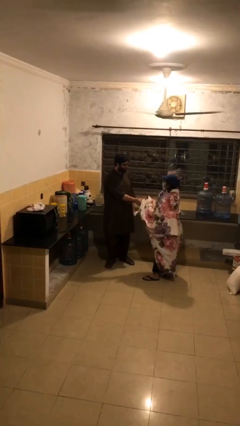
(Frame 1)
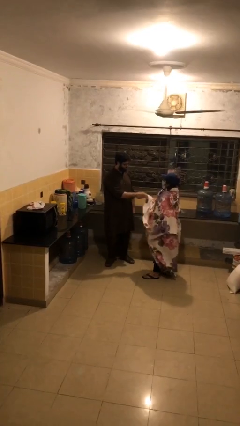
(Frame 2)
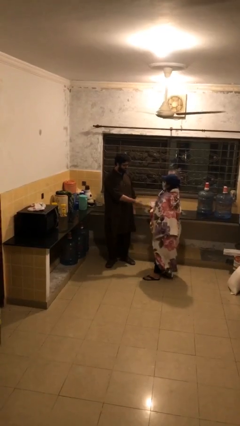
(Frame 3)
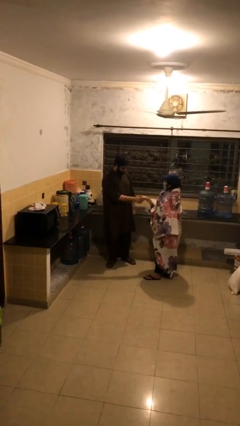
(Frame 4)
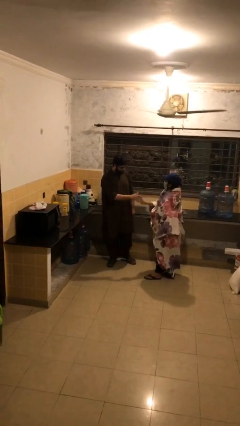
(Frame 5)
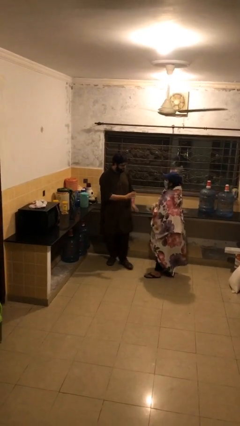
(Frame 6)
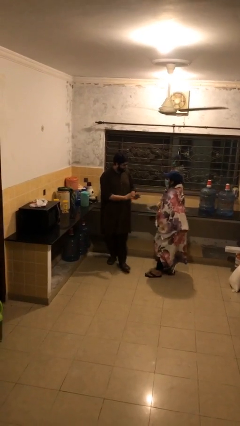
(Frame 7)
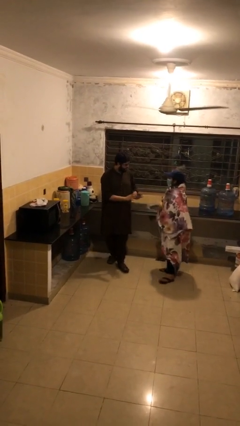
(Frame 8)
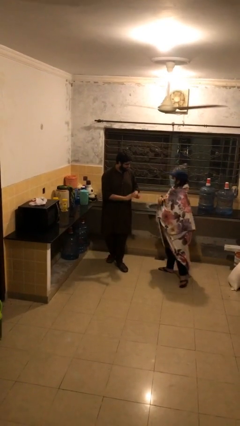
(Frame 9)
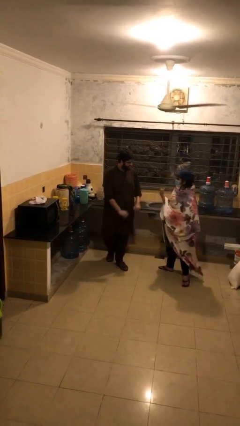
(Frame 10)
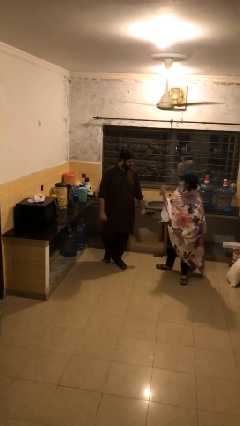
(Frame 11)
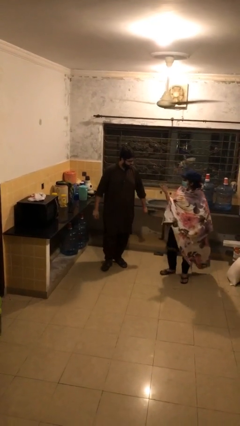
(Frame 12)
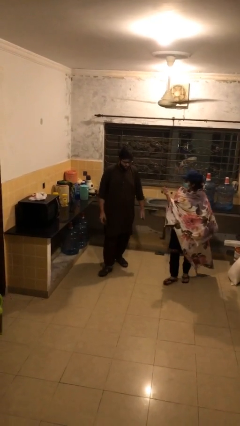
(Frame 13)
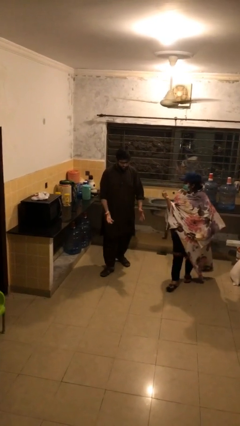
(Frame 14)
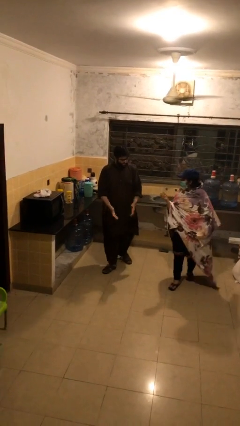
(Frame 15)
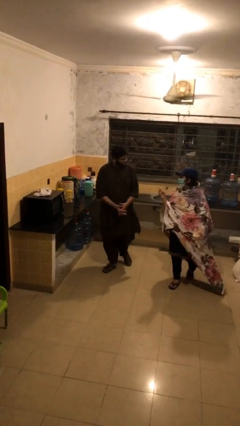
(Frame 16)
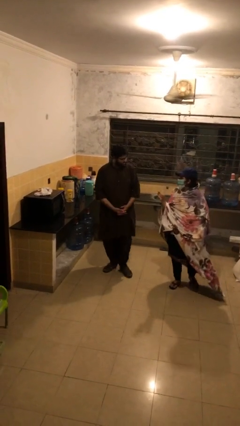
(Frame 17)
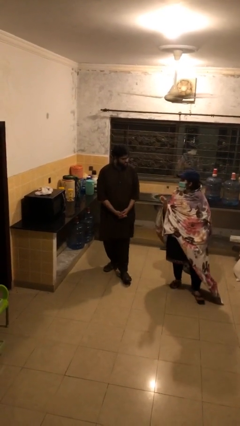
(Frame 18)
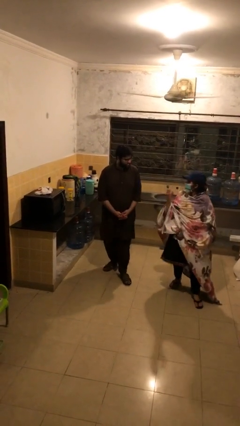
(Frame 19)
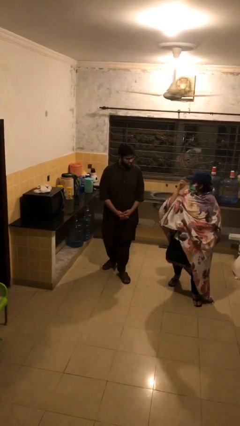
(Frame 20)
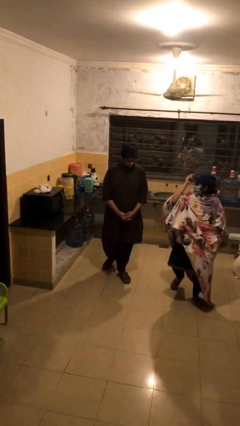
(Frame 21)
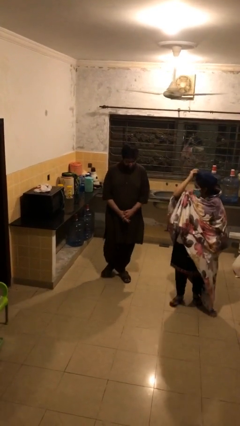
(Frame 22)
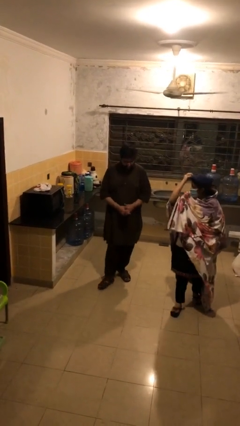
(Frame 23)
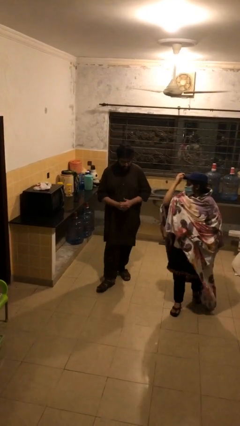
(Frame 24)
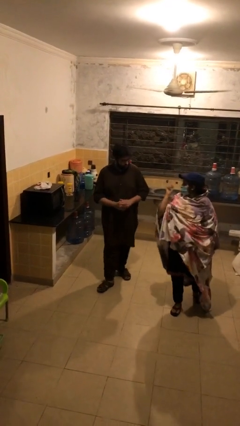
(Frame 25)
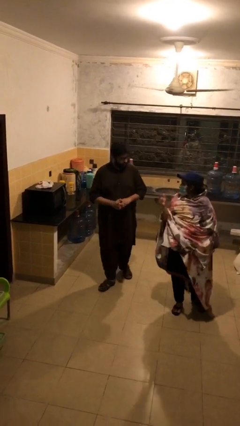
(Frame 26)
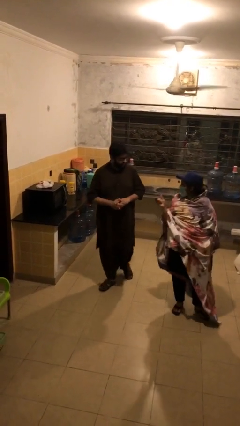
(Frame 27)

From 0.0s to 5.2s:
person talks to person

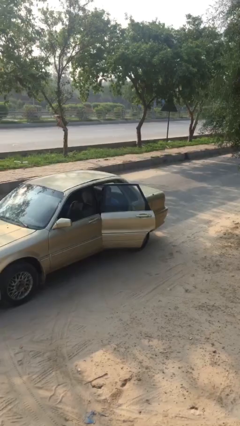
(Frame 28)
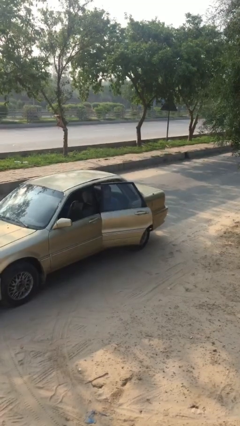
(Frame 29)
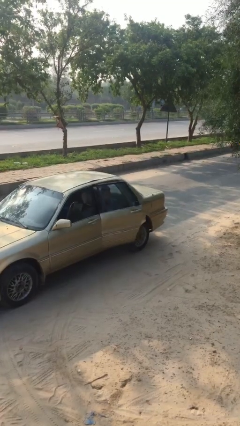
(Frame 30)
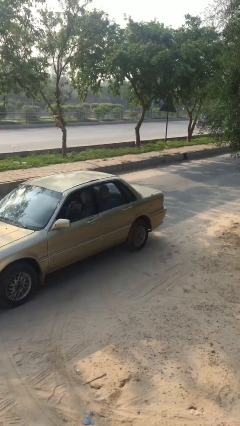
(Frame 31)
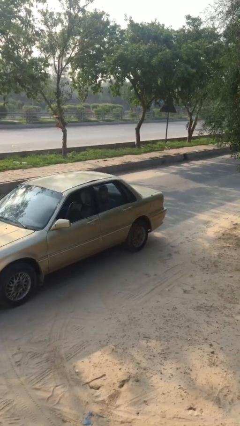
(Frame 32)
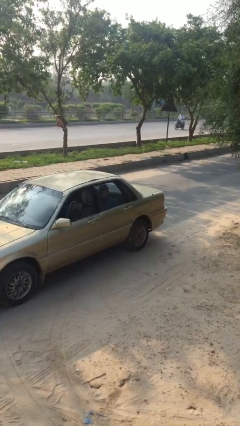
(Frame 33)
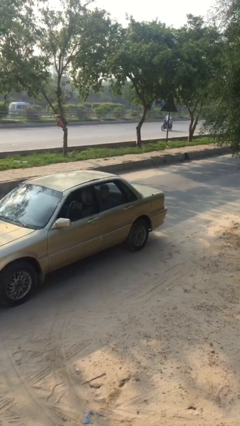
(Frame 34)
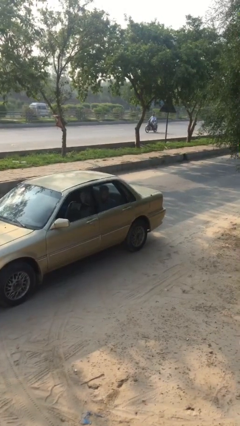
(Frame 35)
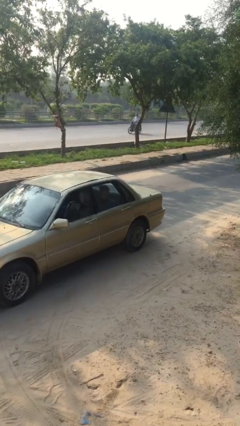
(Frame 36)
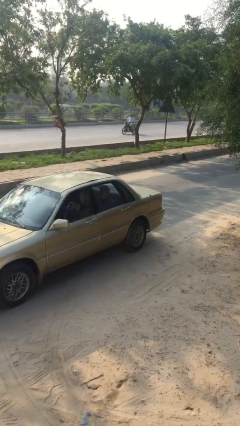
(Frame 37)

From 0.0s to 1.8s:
person closes car door

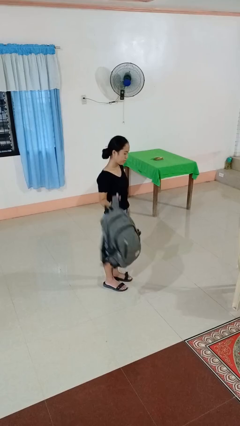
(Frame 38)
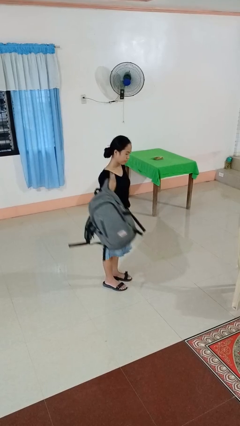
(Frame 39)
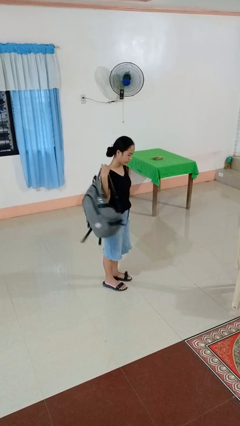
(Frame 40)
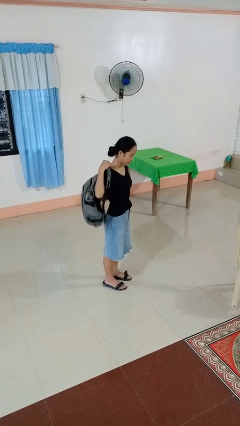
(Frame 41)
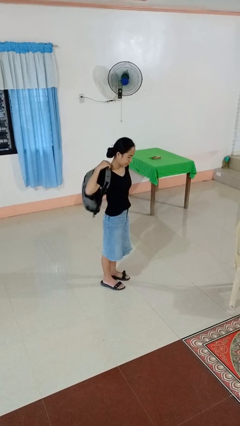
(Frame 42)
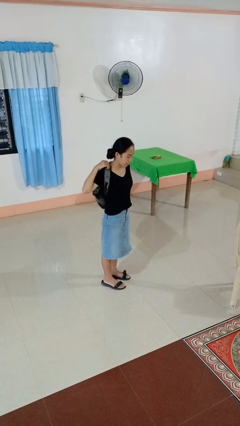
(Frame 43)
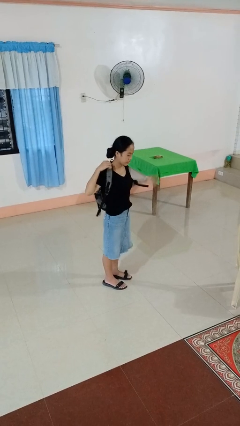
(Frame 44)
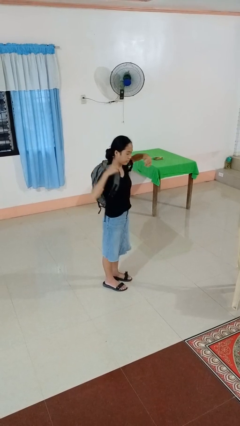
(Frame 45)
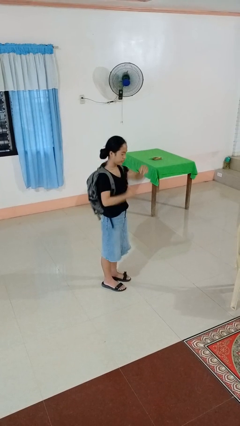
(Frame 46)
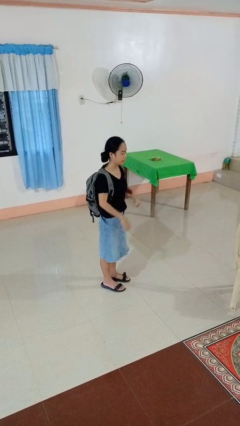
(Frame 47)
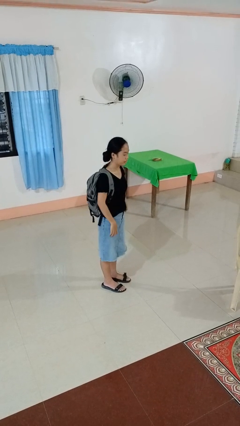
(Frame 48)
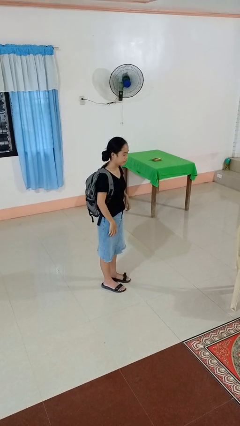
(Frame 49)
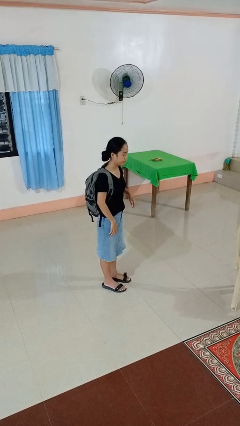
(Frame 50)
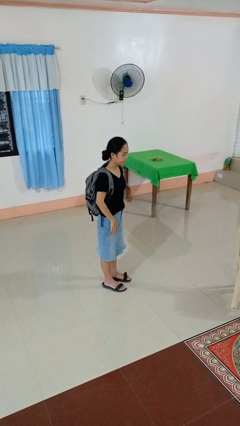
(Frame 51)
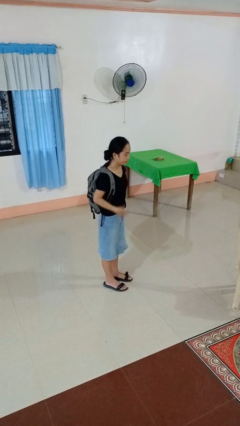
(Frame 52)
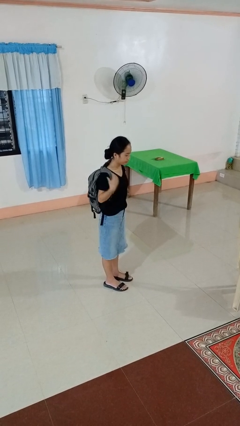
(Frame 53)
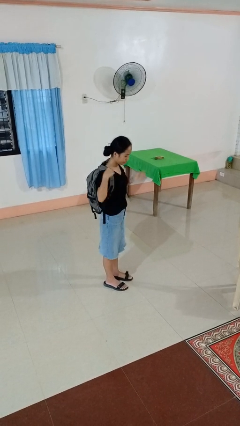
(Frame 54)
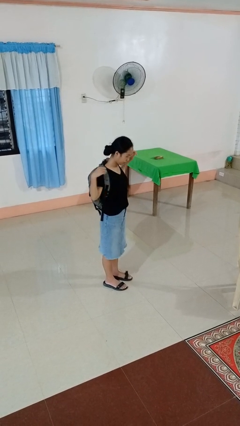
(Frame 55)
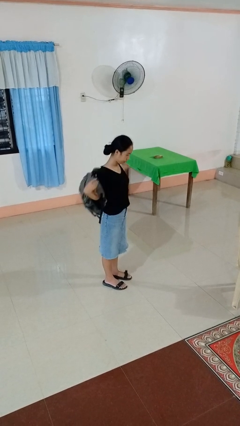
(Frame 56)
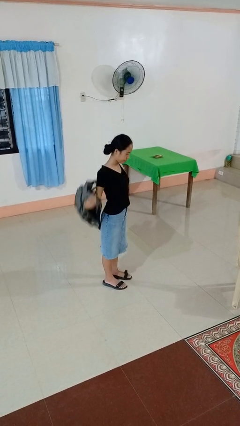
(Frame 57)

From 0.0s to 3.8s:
person puts on backpack

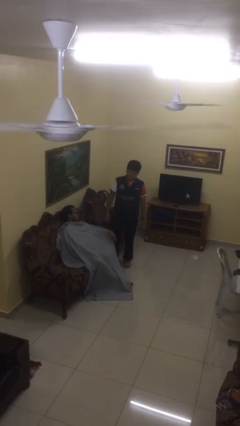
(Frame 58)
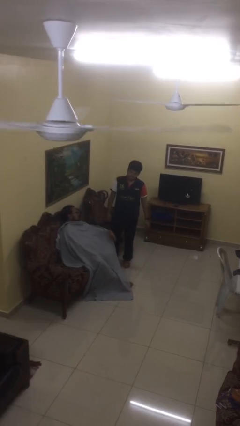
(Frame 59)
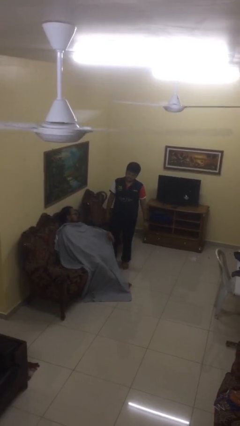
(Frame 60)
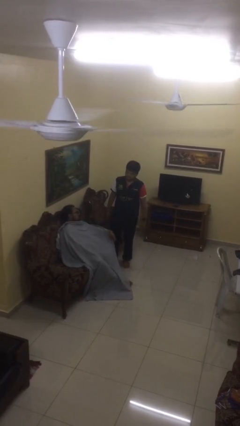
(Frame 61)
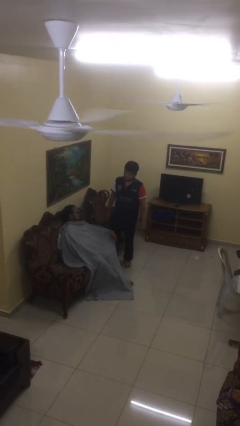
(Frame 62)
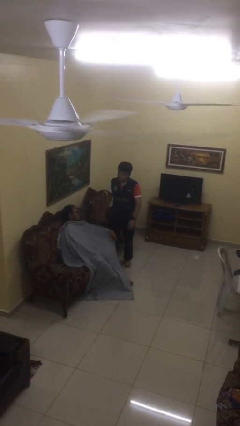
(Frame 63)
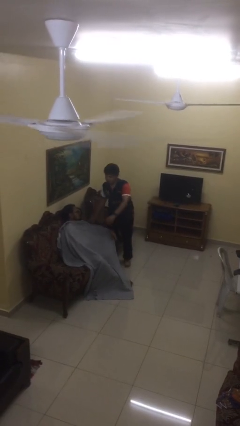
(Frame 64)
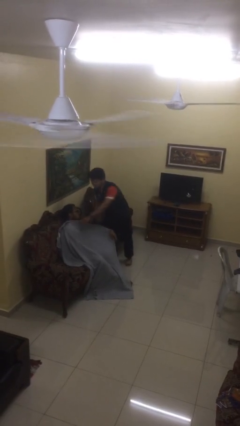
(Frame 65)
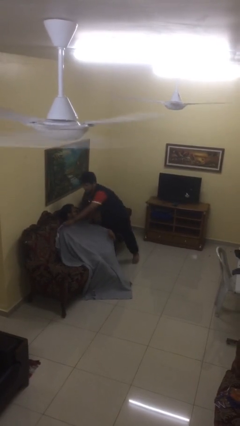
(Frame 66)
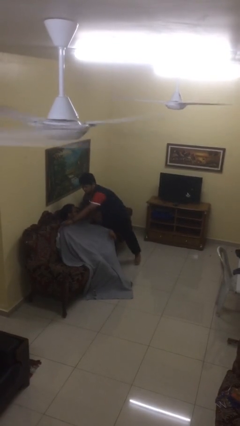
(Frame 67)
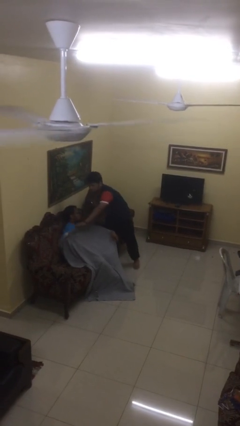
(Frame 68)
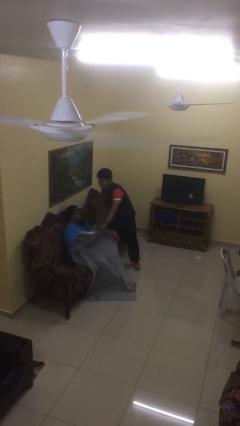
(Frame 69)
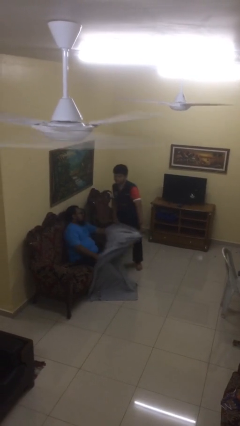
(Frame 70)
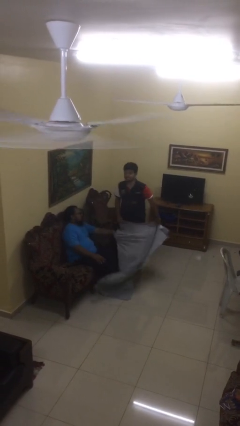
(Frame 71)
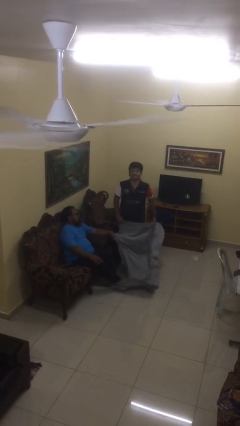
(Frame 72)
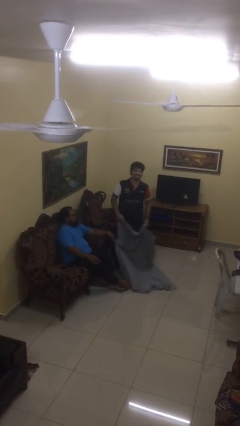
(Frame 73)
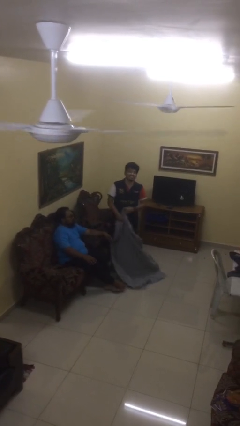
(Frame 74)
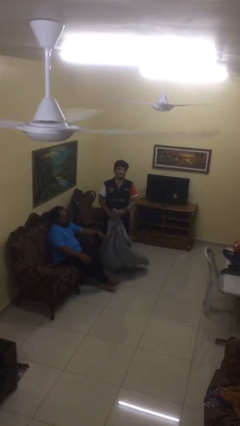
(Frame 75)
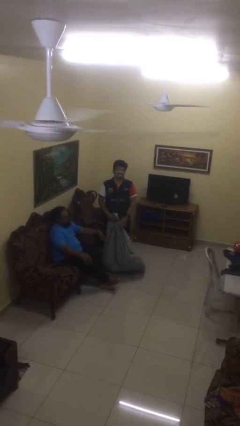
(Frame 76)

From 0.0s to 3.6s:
person uncovers friend with blanket

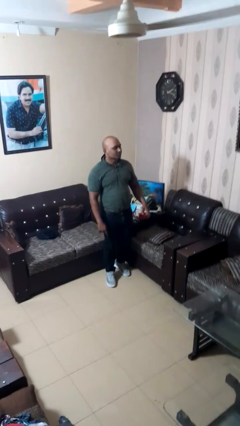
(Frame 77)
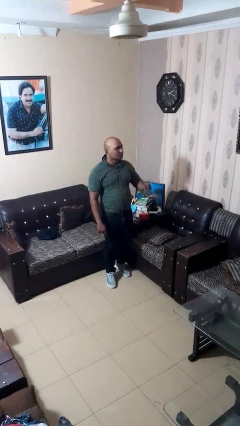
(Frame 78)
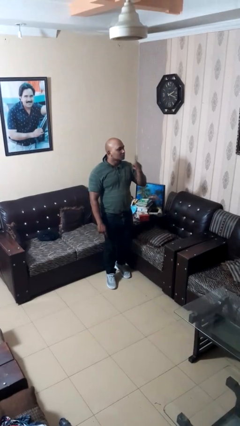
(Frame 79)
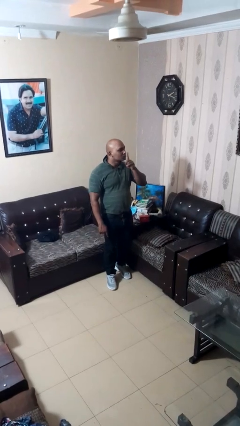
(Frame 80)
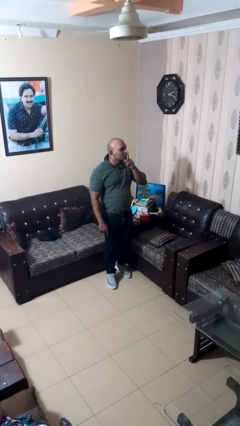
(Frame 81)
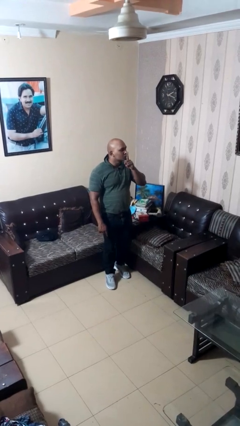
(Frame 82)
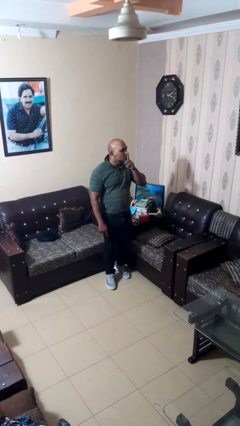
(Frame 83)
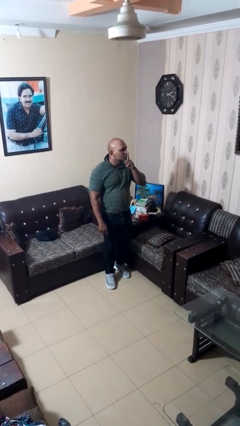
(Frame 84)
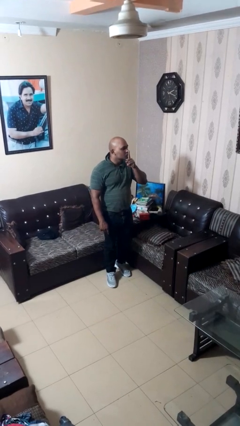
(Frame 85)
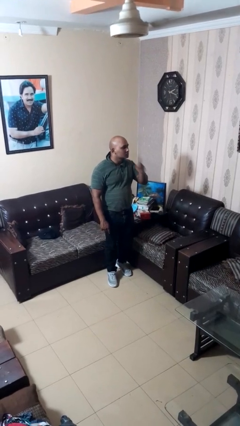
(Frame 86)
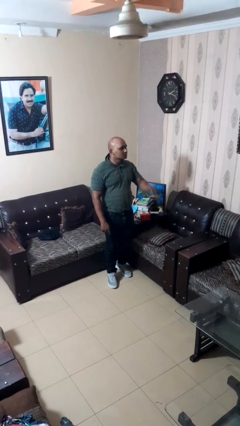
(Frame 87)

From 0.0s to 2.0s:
person gestures be quiet

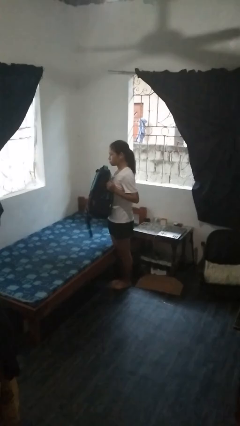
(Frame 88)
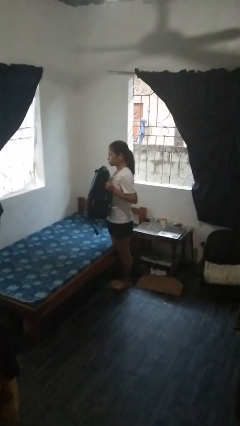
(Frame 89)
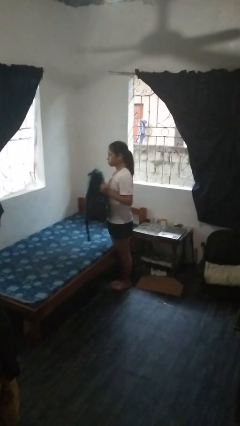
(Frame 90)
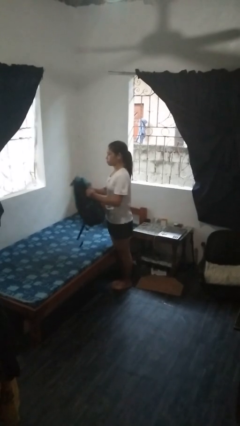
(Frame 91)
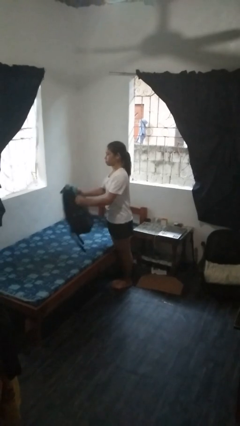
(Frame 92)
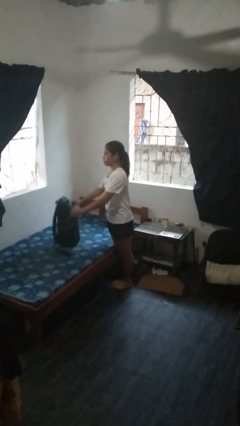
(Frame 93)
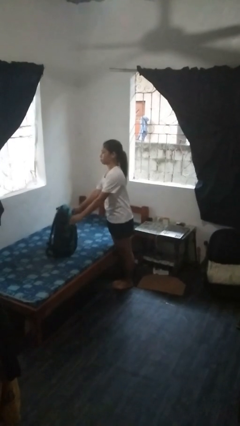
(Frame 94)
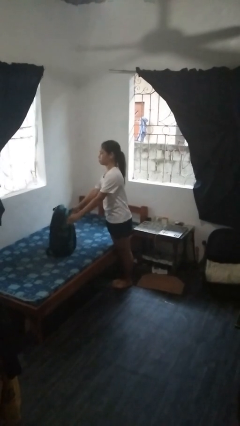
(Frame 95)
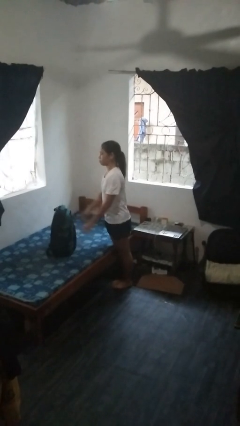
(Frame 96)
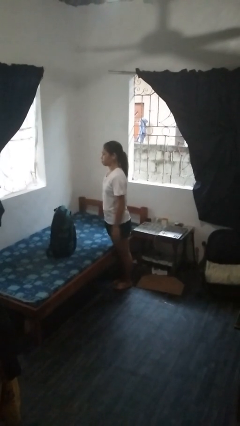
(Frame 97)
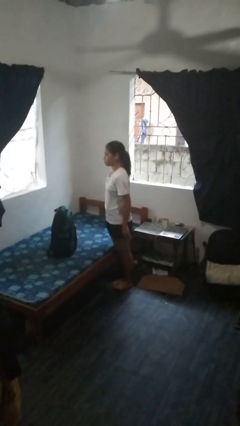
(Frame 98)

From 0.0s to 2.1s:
person puts down object on bed
